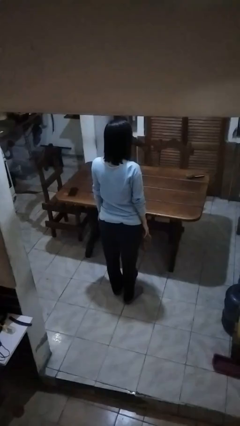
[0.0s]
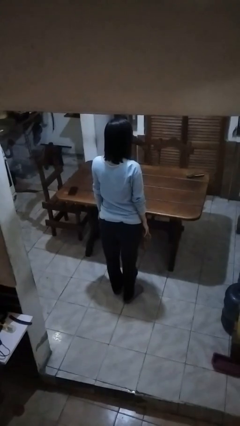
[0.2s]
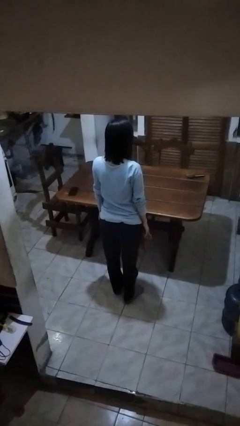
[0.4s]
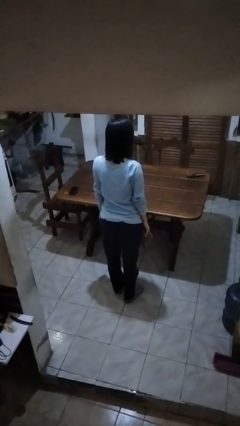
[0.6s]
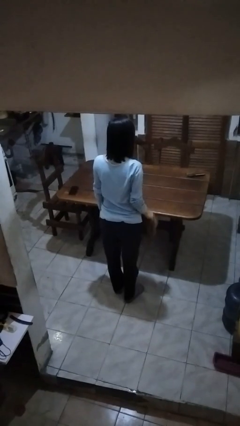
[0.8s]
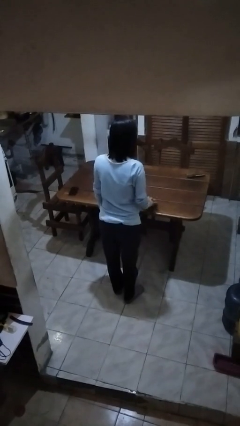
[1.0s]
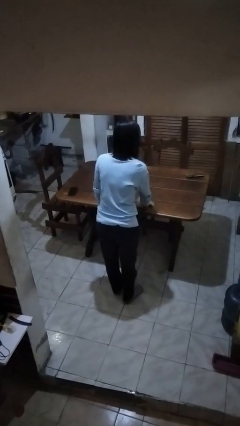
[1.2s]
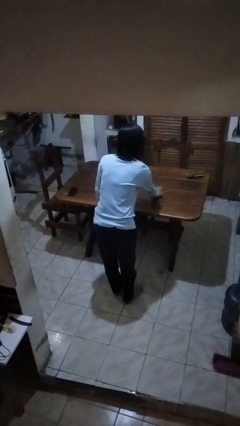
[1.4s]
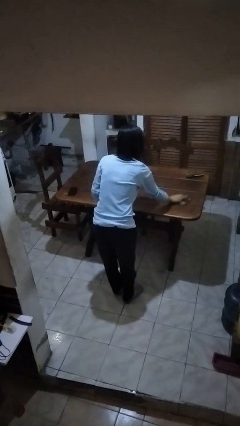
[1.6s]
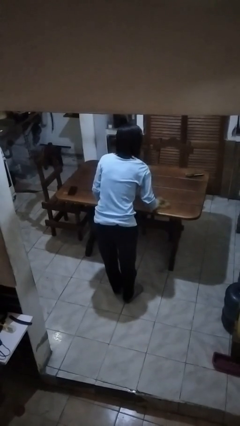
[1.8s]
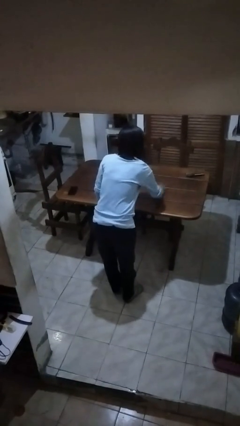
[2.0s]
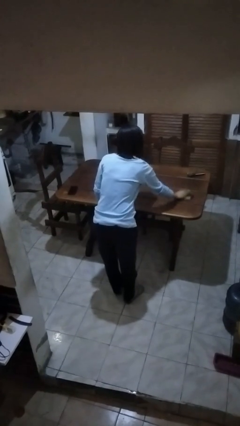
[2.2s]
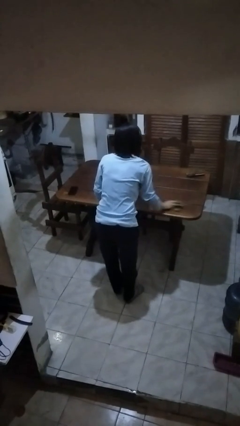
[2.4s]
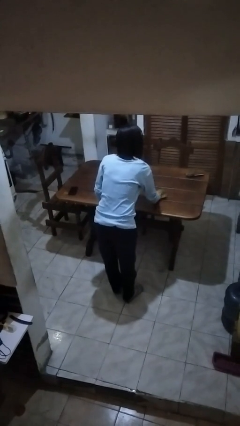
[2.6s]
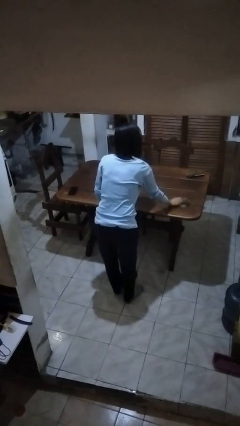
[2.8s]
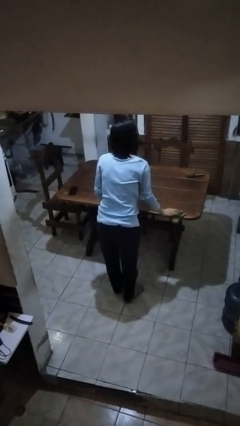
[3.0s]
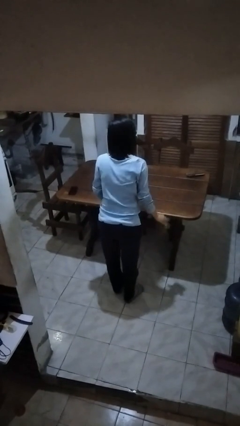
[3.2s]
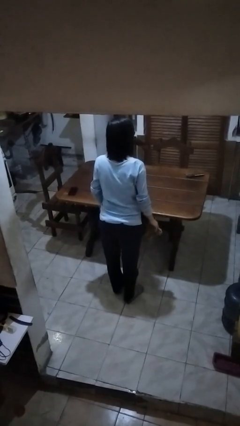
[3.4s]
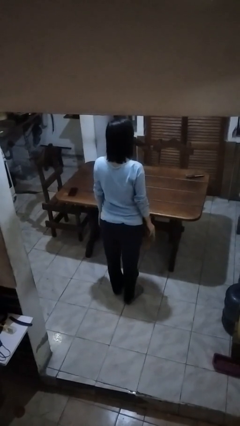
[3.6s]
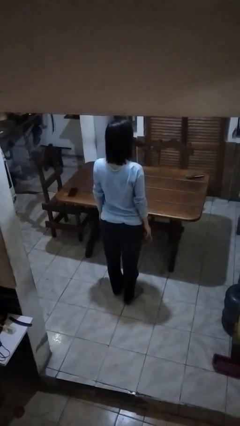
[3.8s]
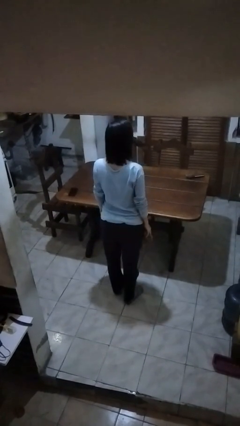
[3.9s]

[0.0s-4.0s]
person cleans table with rag

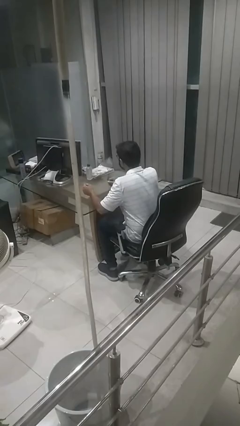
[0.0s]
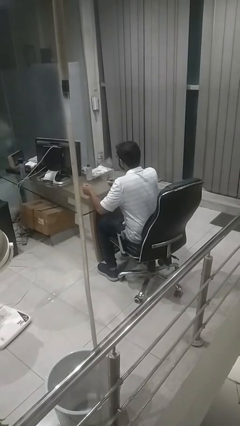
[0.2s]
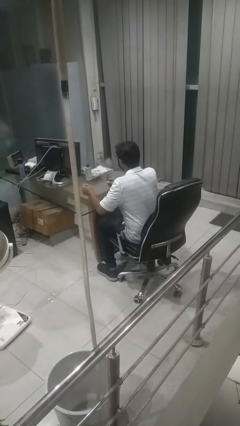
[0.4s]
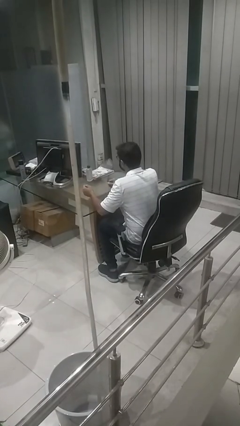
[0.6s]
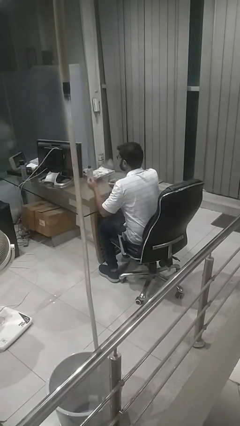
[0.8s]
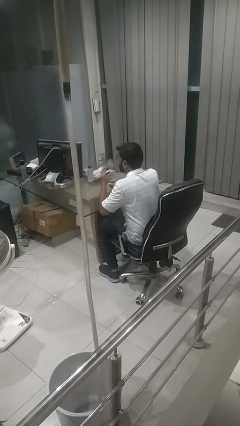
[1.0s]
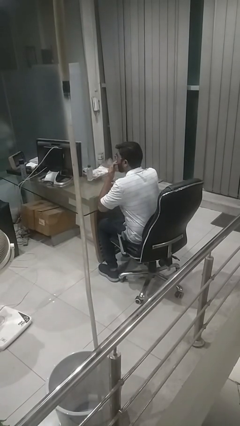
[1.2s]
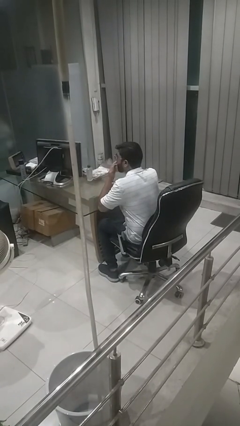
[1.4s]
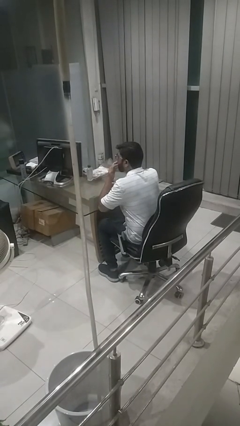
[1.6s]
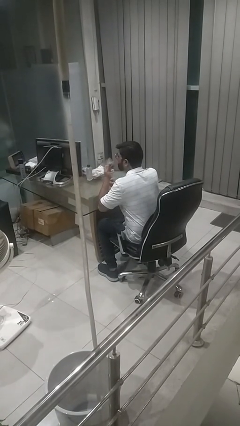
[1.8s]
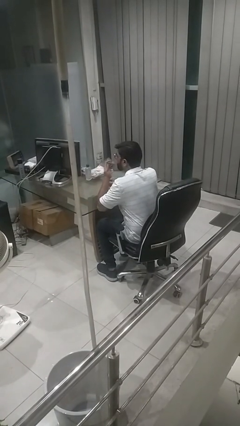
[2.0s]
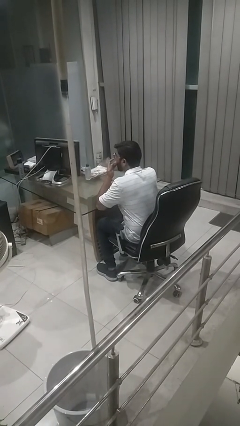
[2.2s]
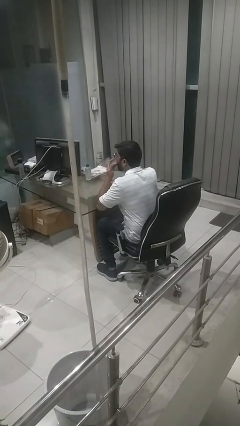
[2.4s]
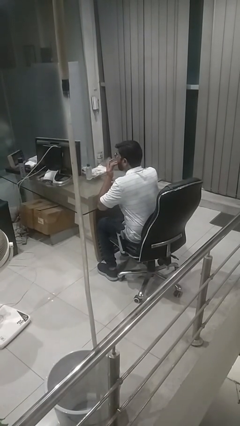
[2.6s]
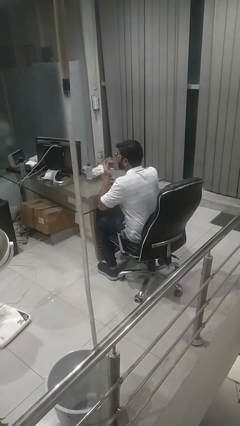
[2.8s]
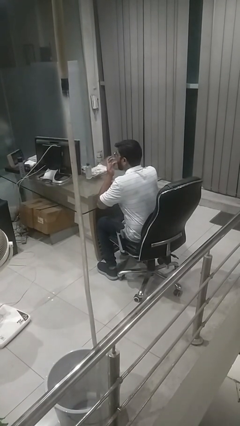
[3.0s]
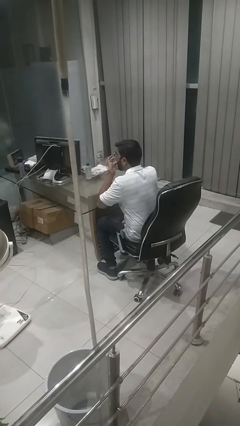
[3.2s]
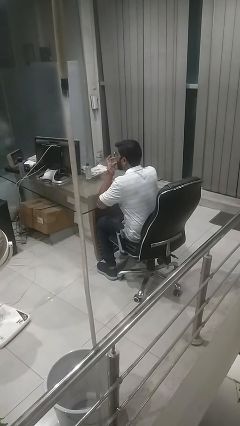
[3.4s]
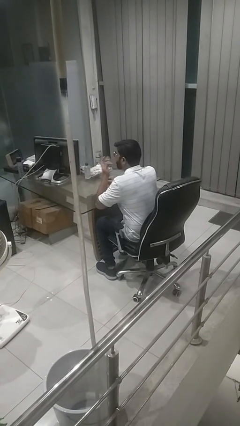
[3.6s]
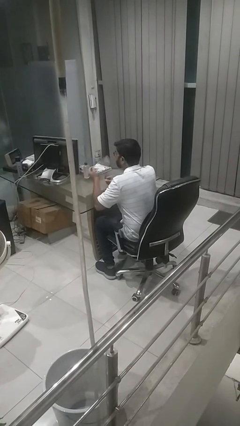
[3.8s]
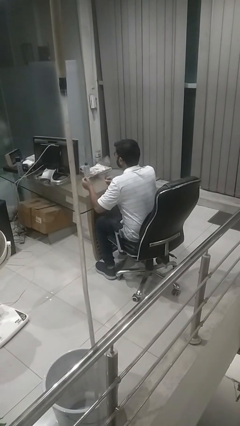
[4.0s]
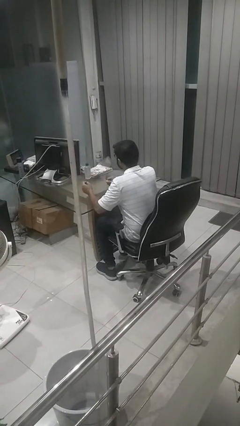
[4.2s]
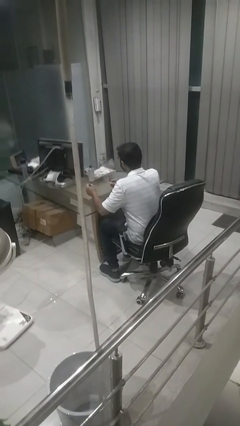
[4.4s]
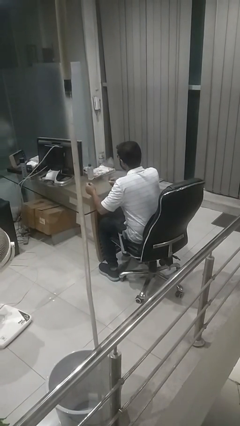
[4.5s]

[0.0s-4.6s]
person licks fingers

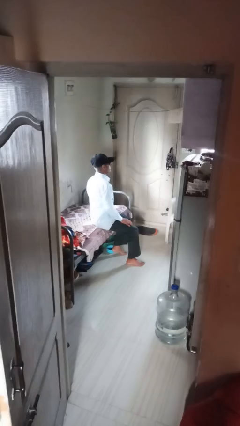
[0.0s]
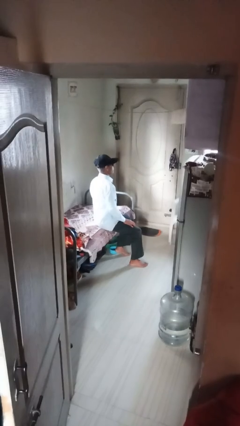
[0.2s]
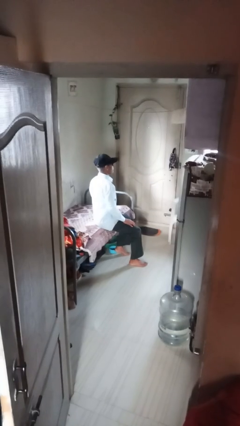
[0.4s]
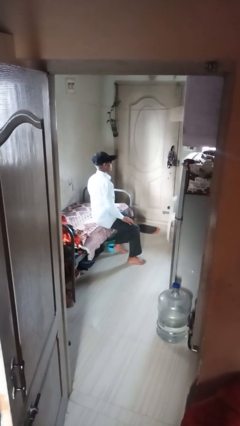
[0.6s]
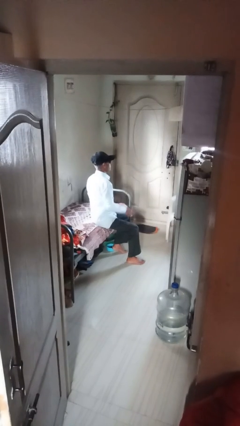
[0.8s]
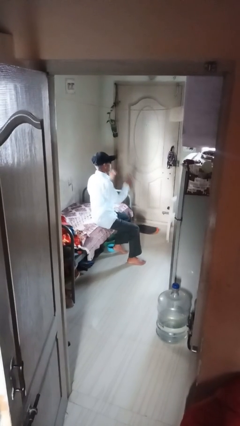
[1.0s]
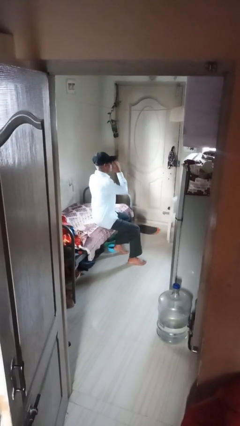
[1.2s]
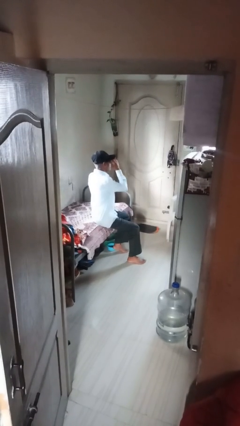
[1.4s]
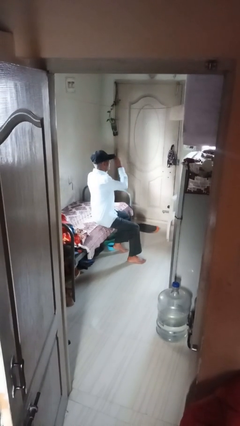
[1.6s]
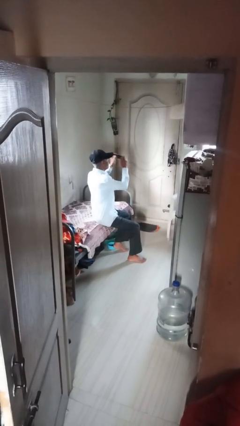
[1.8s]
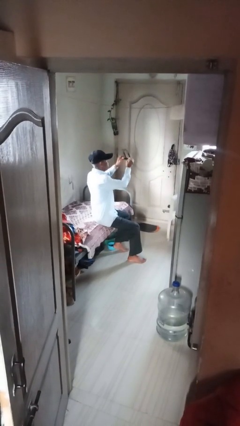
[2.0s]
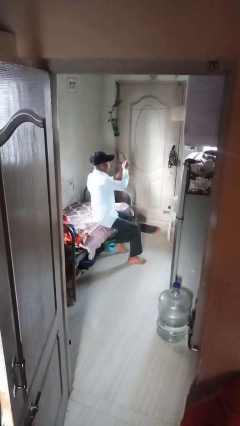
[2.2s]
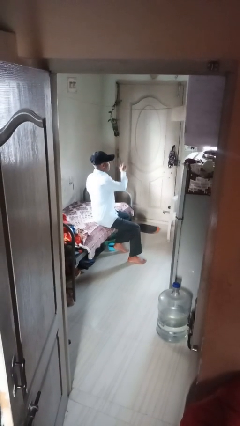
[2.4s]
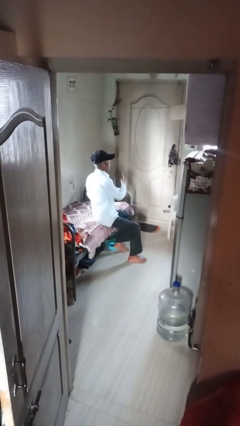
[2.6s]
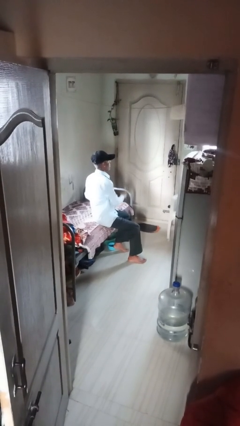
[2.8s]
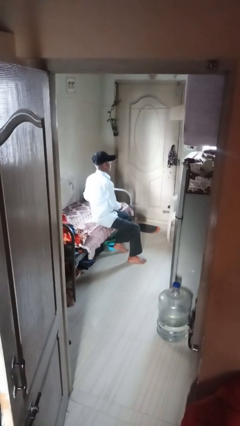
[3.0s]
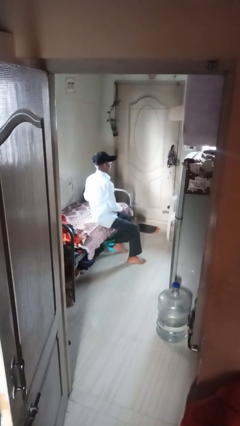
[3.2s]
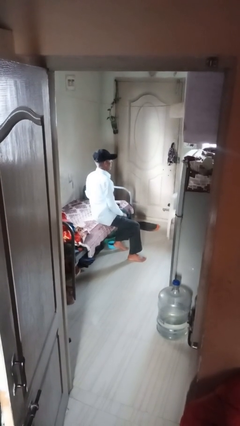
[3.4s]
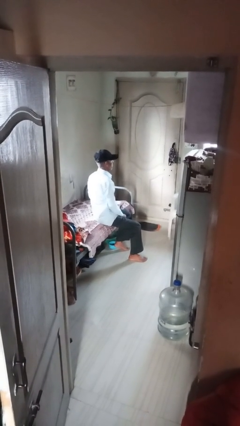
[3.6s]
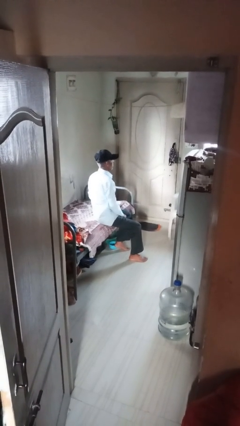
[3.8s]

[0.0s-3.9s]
person takes off sunglasses

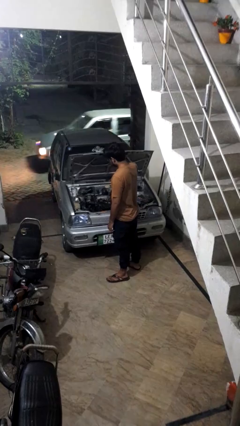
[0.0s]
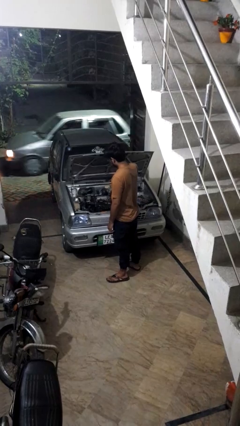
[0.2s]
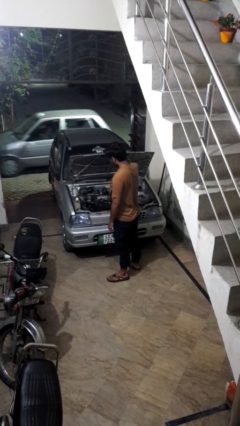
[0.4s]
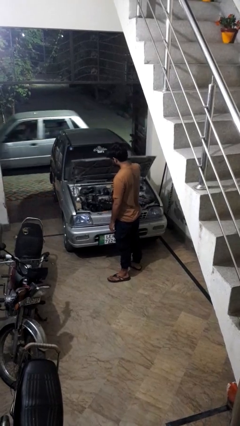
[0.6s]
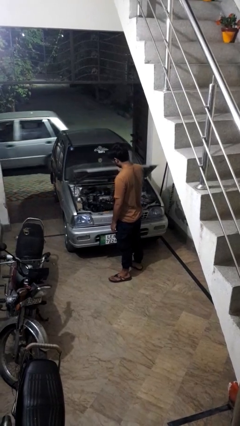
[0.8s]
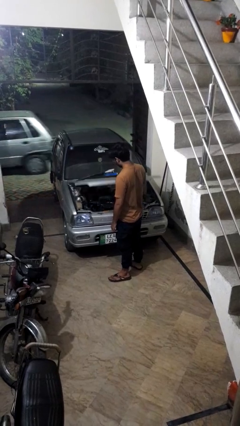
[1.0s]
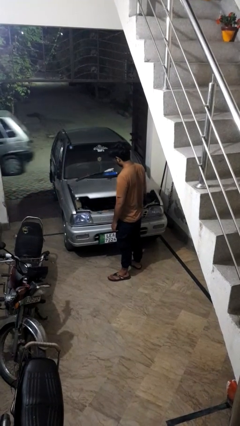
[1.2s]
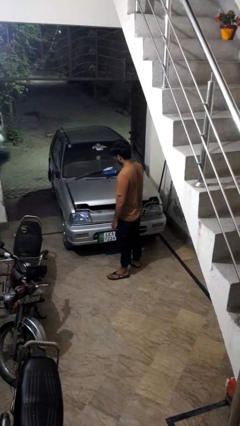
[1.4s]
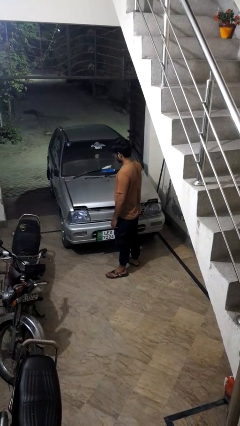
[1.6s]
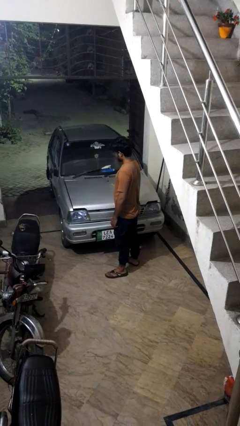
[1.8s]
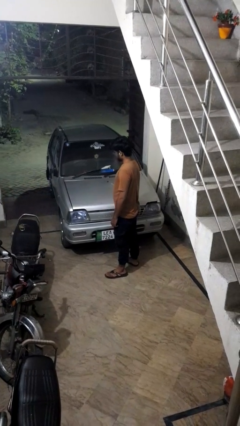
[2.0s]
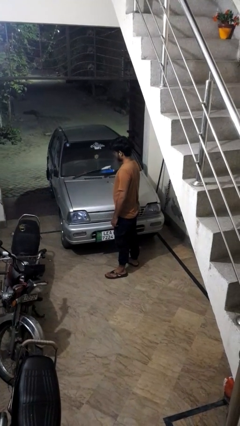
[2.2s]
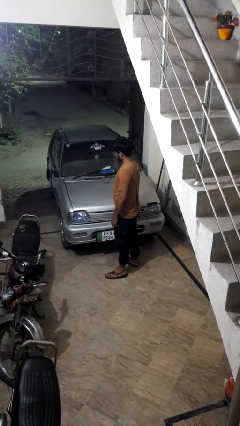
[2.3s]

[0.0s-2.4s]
person closes car hood

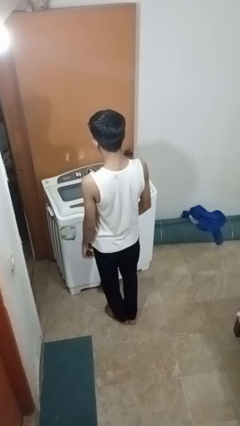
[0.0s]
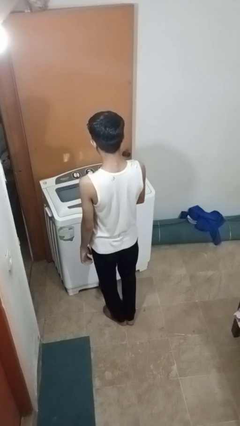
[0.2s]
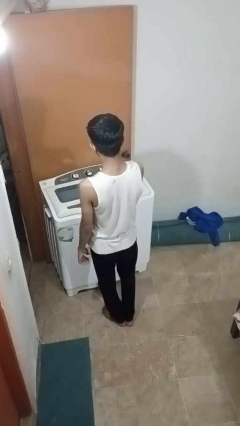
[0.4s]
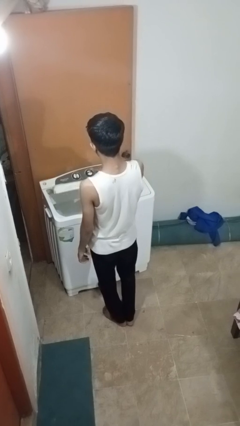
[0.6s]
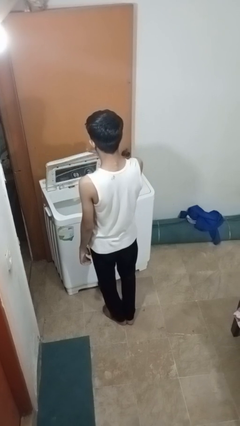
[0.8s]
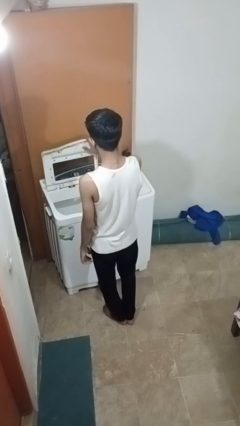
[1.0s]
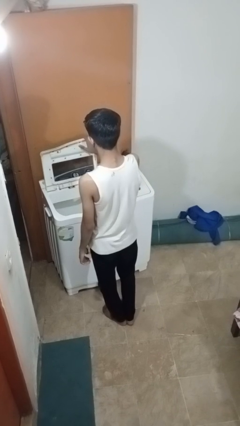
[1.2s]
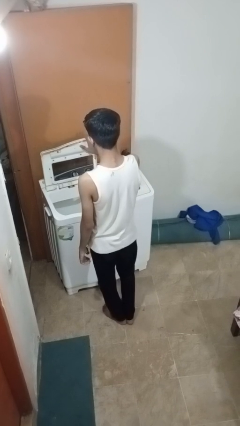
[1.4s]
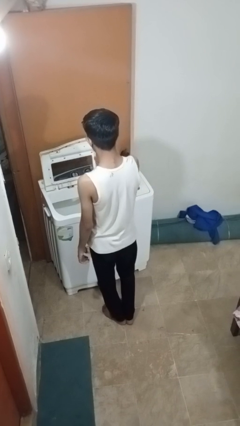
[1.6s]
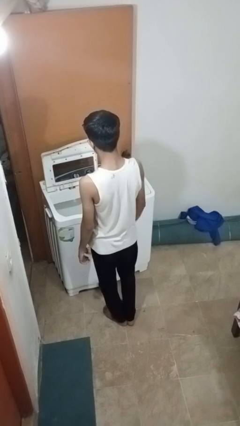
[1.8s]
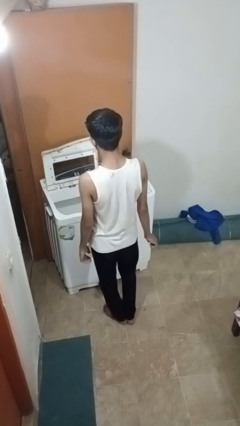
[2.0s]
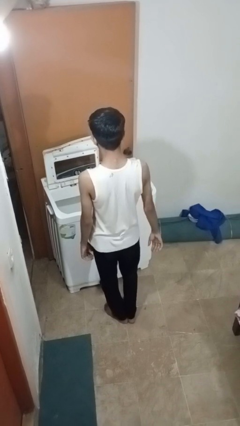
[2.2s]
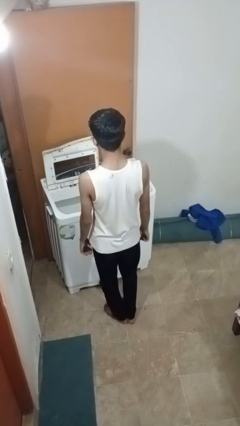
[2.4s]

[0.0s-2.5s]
person opens clothes washer
